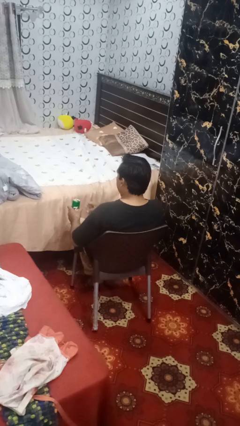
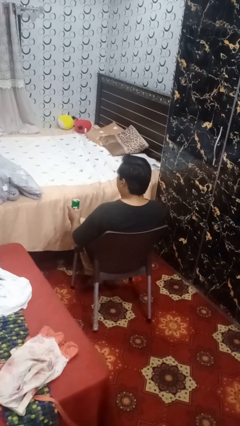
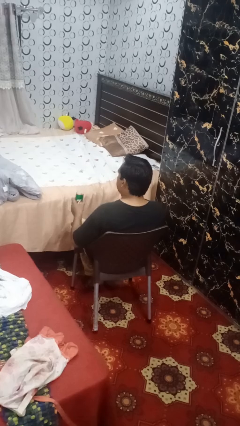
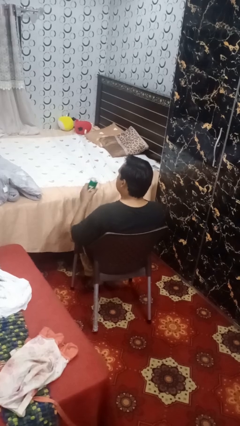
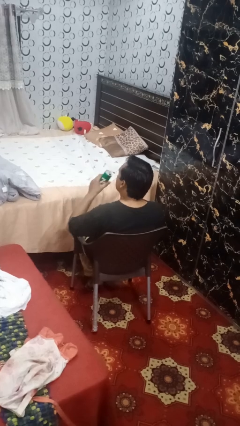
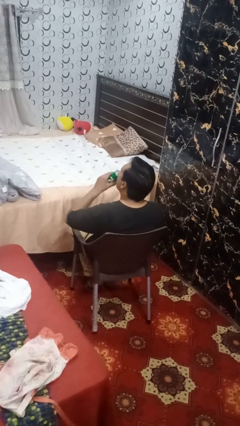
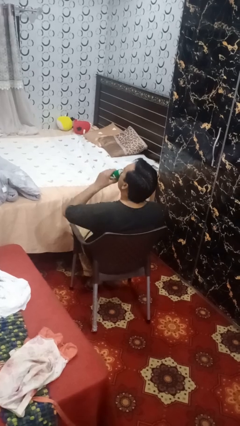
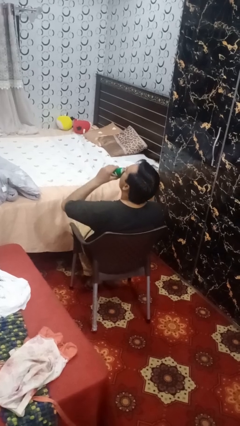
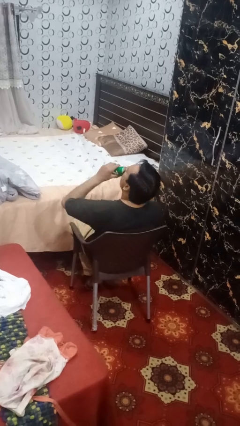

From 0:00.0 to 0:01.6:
person drinks from beverage can

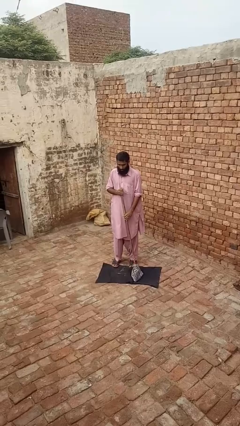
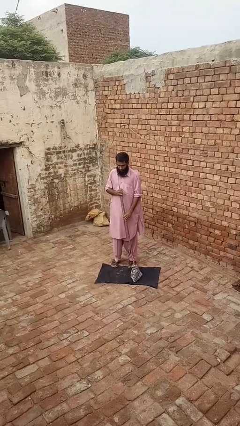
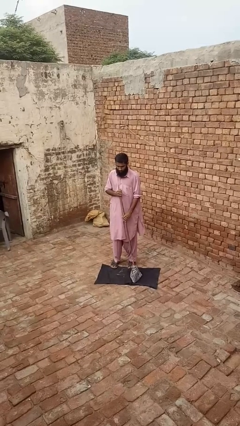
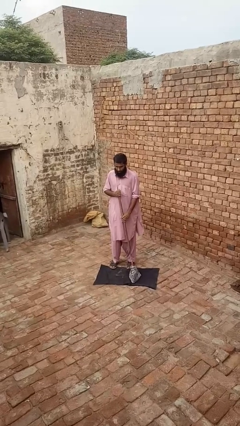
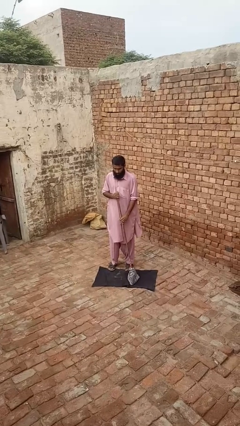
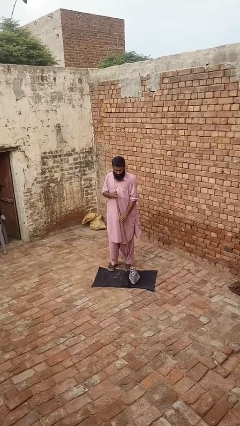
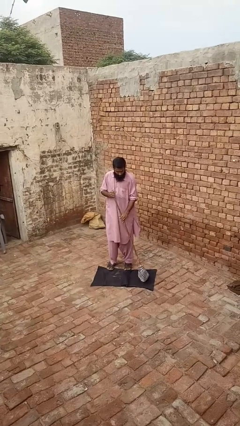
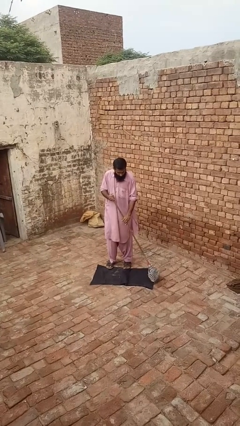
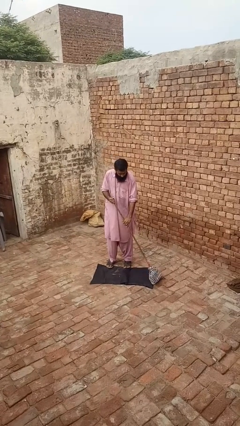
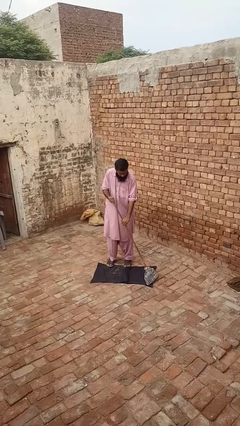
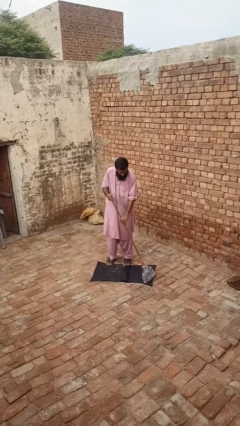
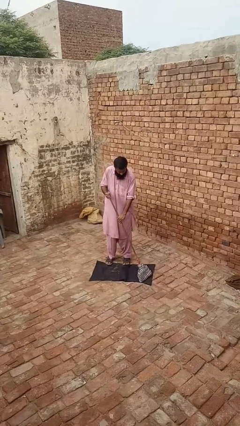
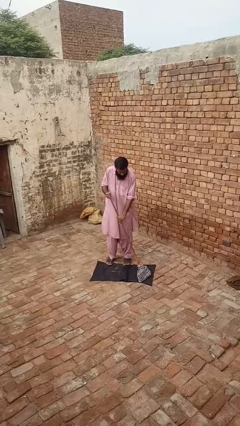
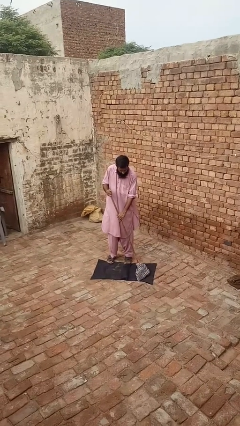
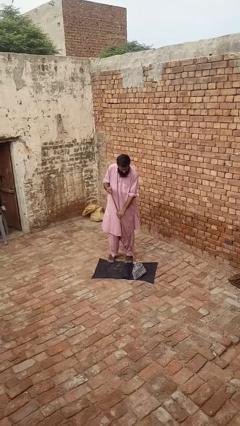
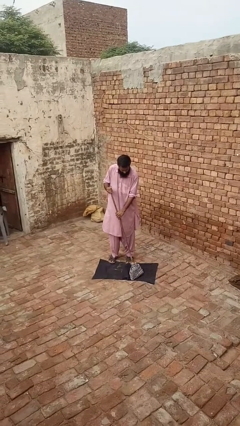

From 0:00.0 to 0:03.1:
person vacuums carpet

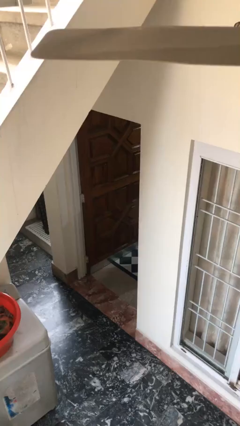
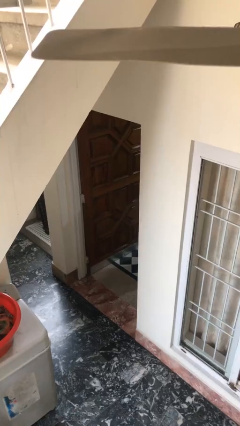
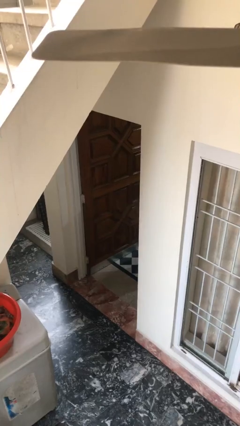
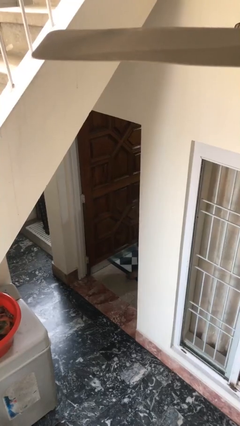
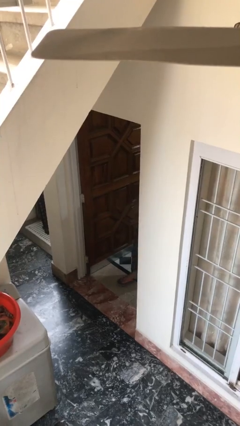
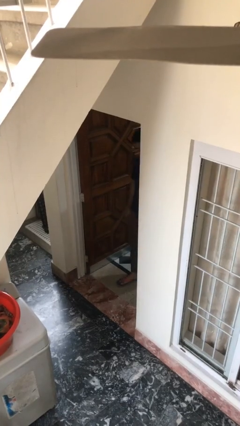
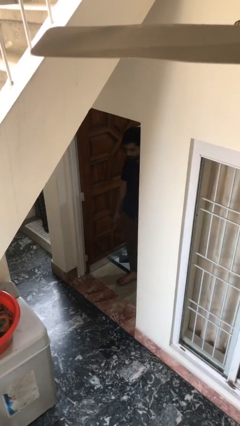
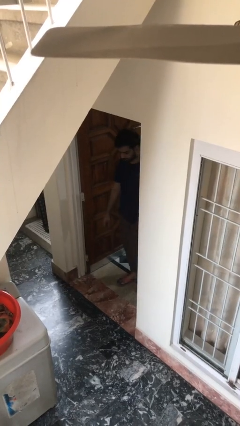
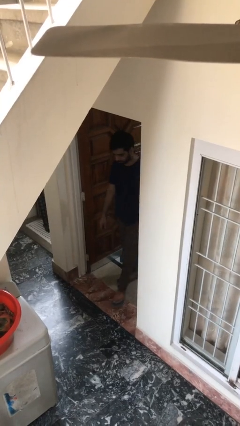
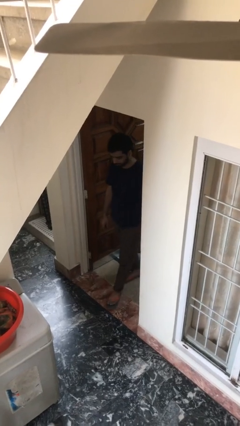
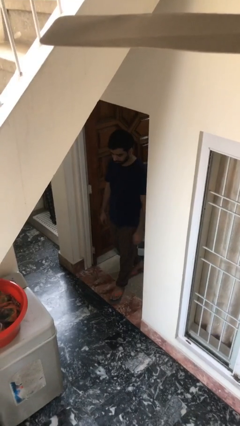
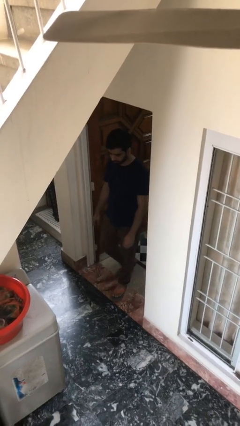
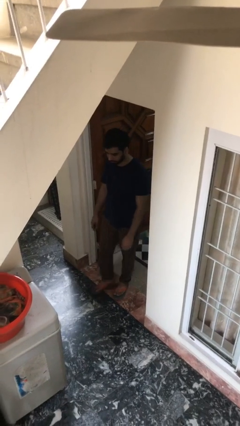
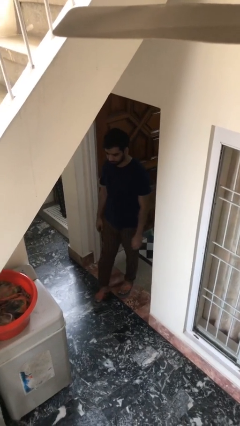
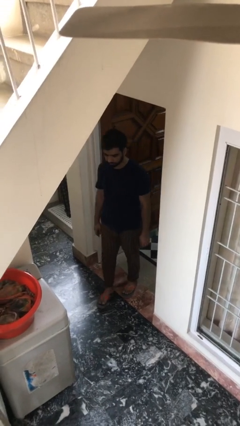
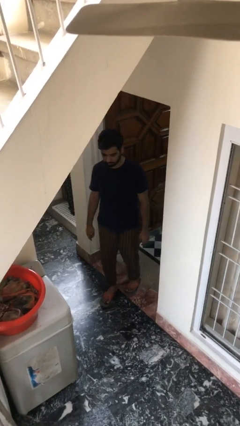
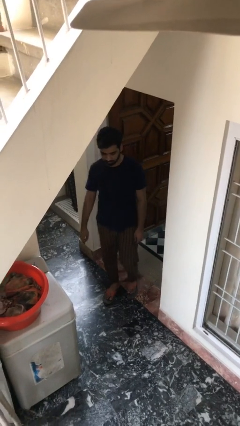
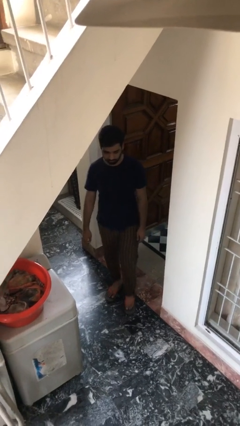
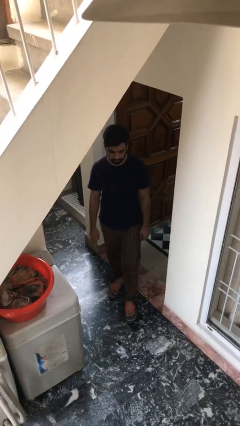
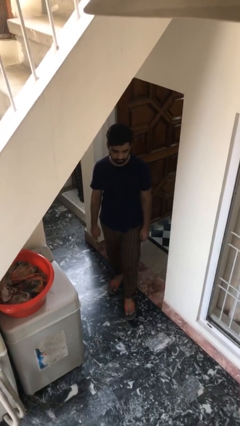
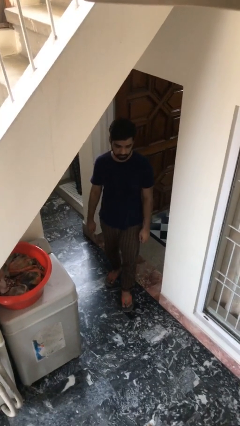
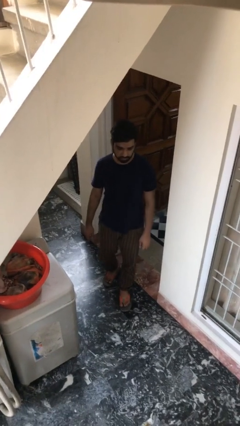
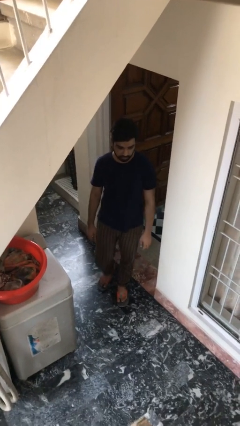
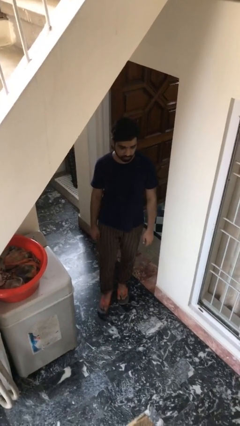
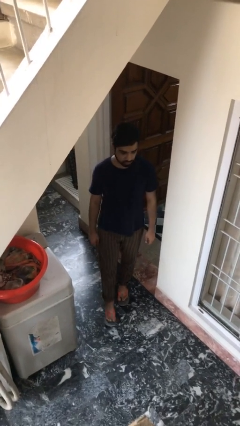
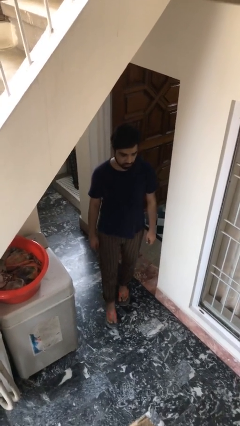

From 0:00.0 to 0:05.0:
person enters scene through structure

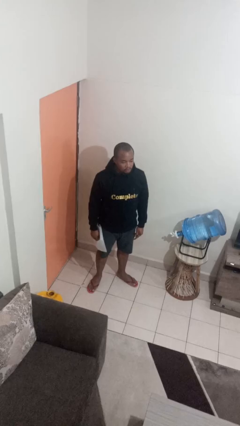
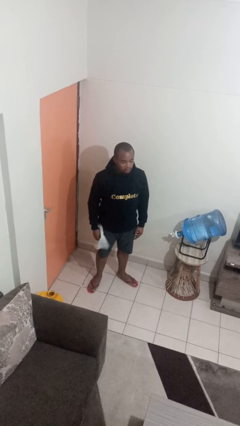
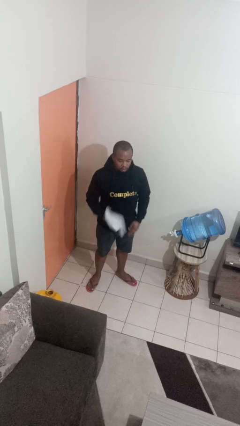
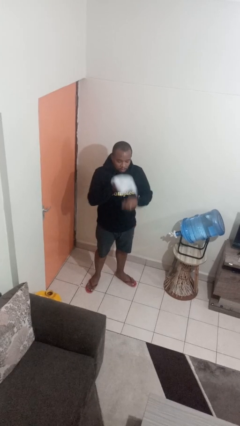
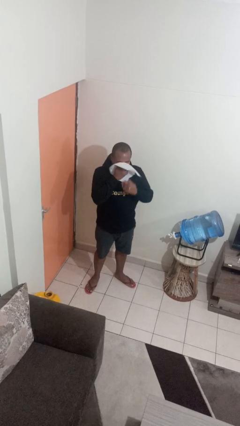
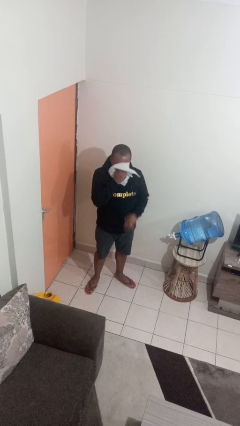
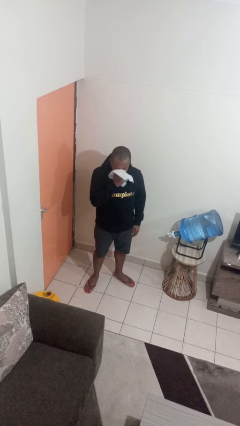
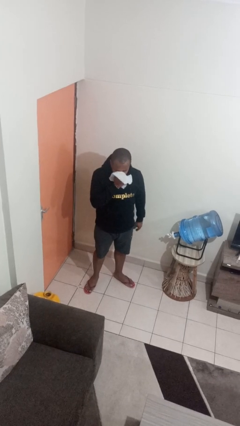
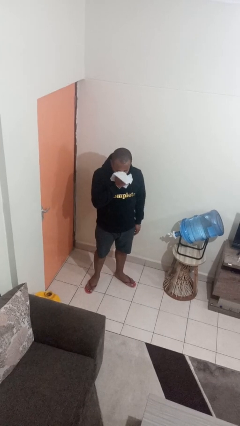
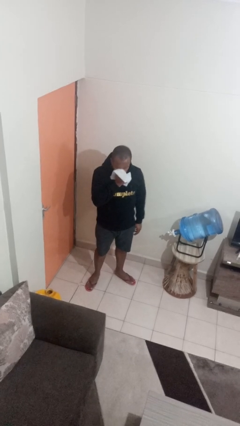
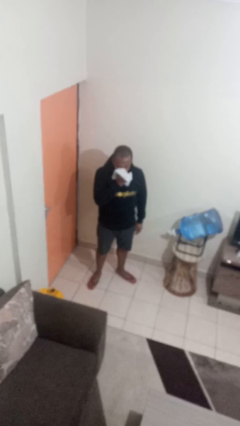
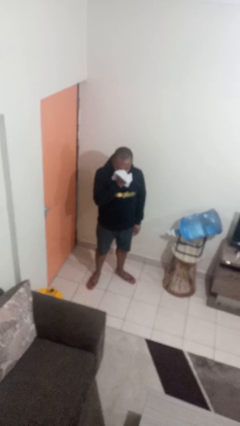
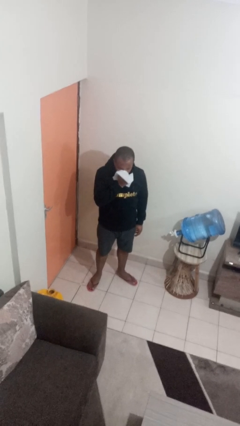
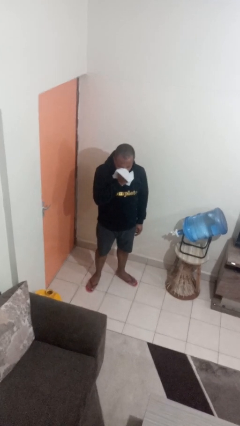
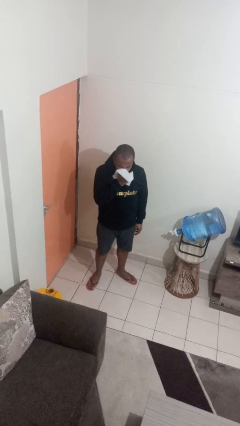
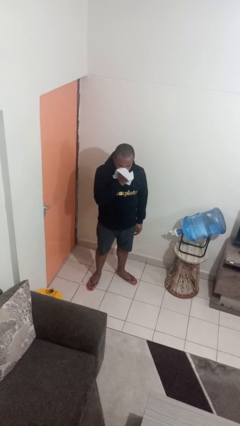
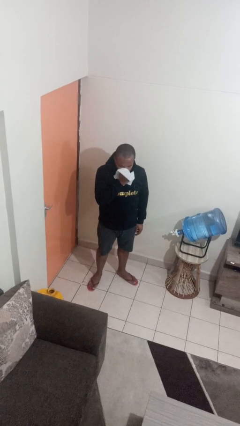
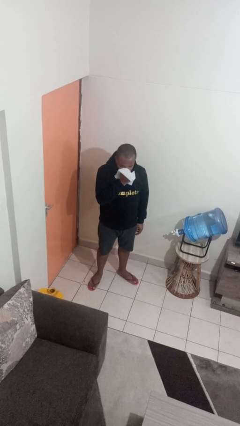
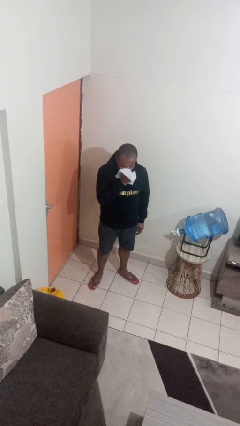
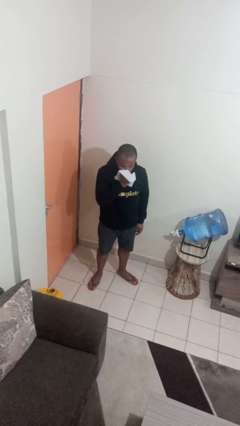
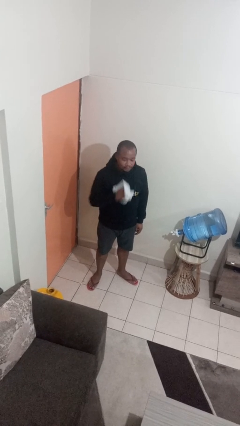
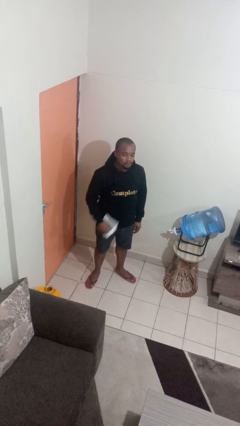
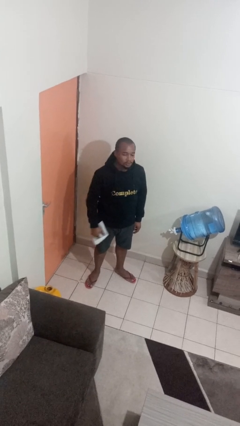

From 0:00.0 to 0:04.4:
person blows nose

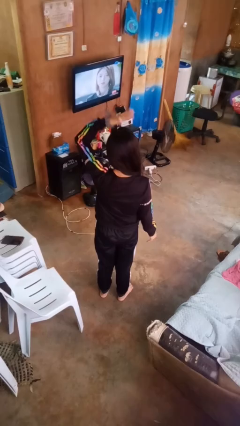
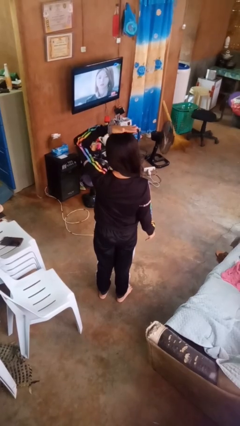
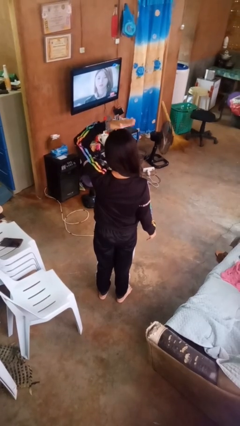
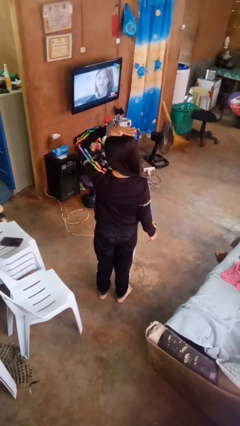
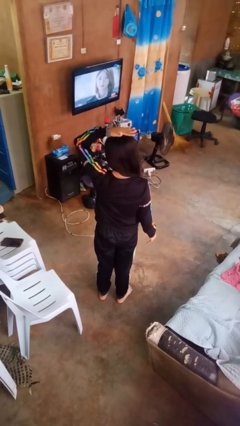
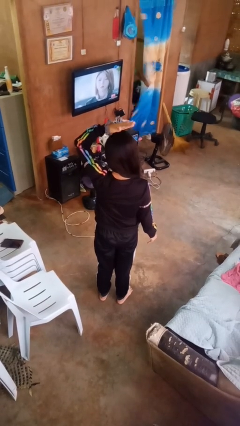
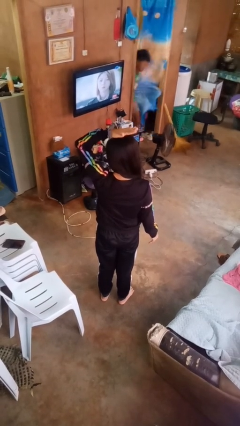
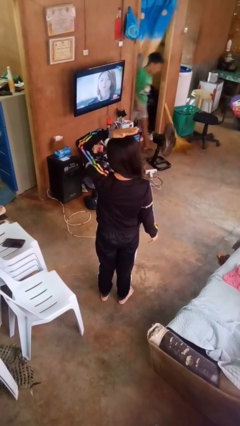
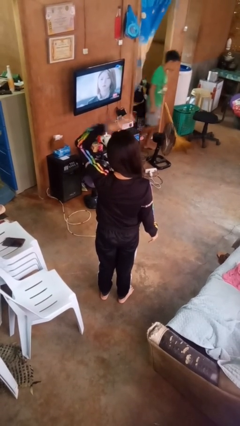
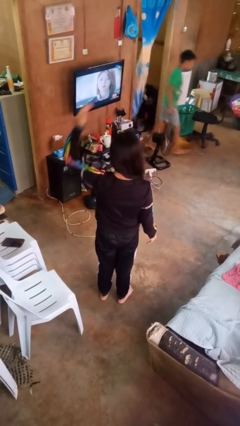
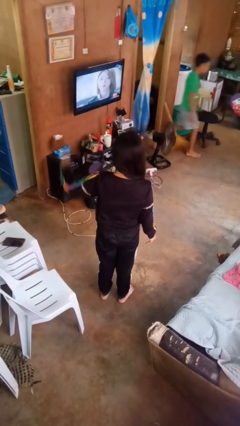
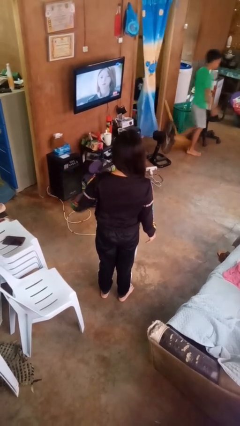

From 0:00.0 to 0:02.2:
person pats head

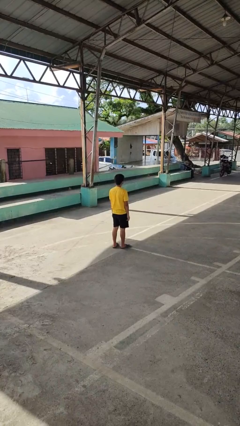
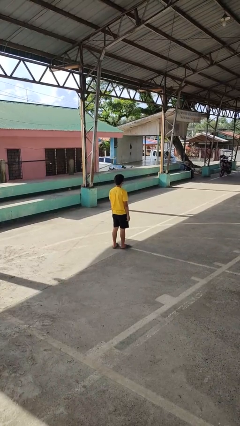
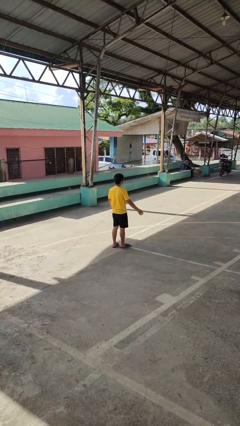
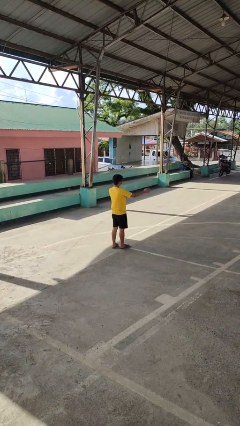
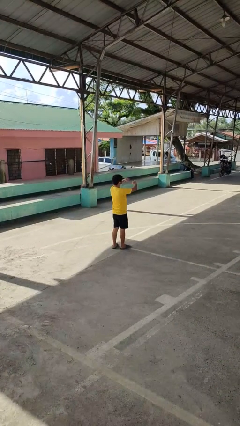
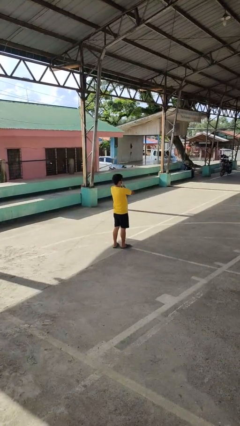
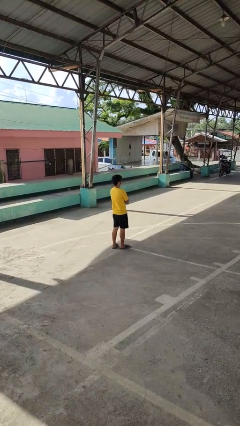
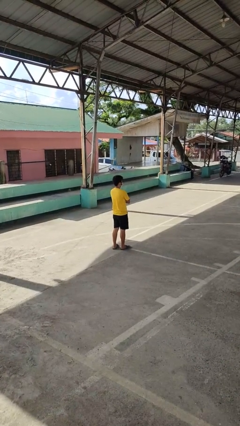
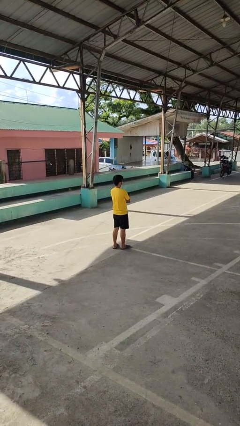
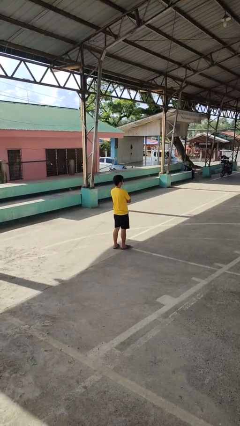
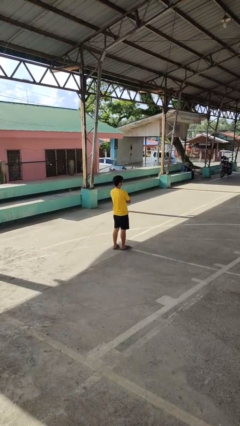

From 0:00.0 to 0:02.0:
person crosses arms
